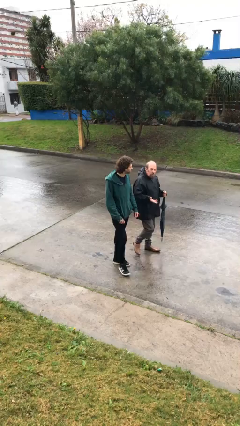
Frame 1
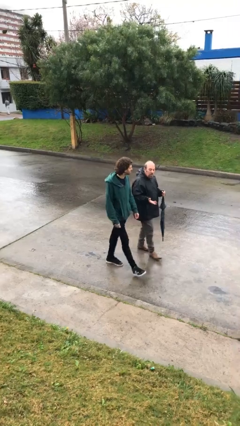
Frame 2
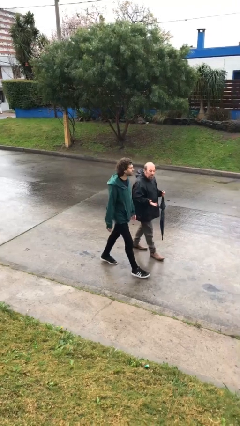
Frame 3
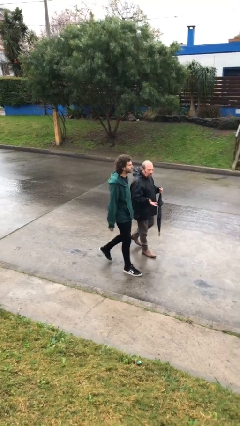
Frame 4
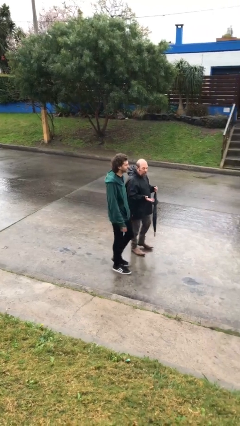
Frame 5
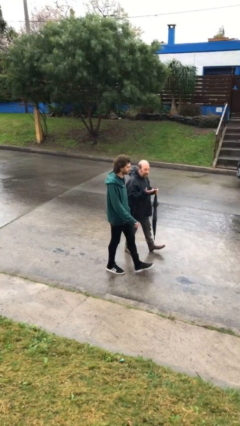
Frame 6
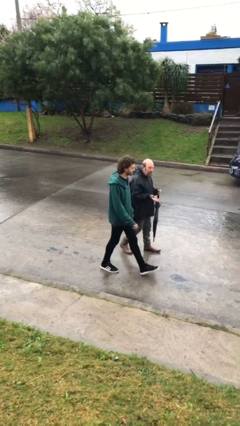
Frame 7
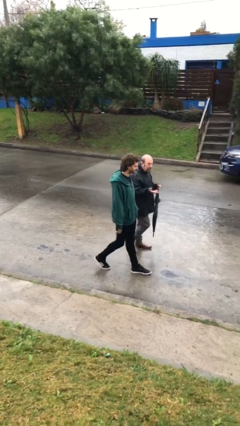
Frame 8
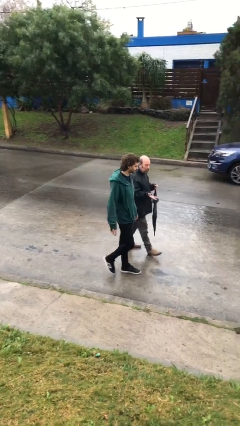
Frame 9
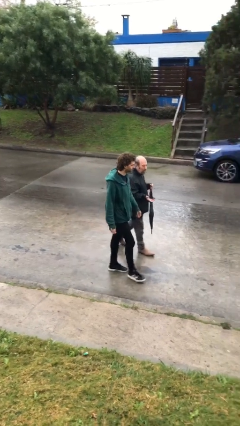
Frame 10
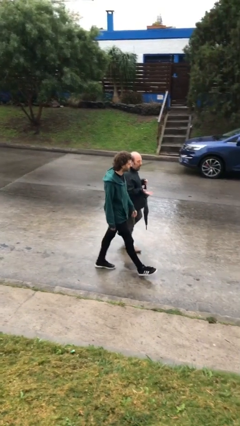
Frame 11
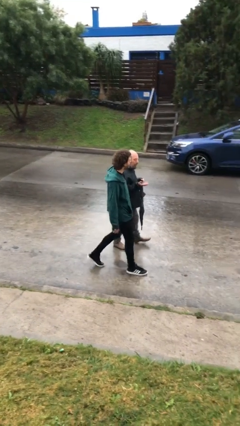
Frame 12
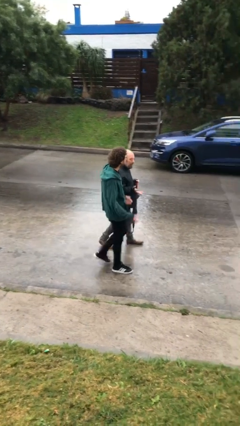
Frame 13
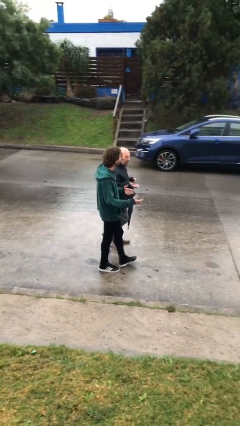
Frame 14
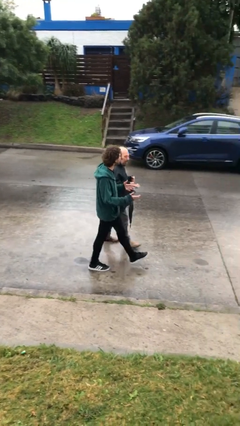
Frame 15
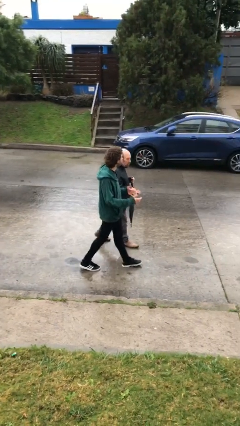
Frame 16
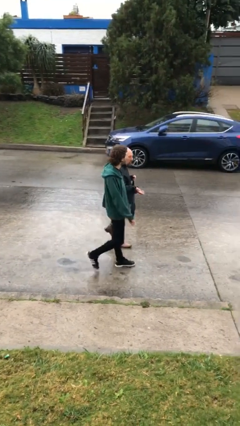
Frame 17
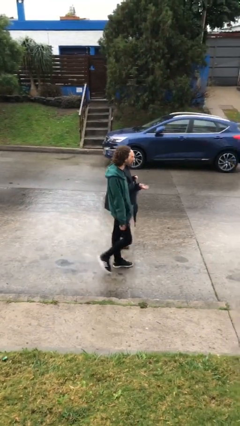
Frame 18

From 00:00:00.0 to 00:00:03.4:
person talks to person

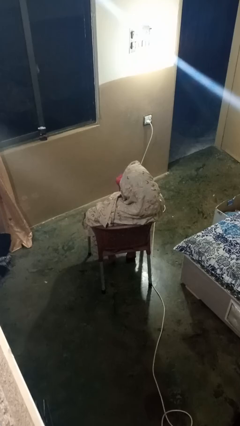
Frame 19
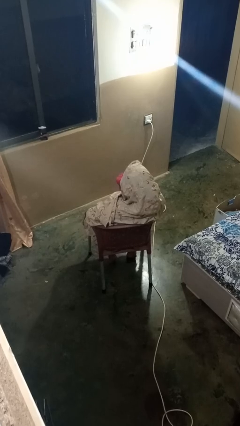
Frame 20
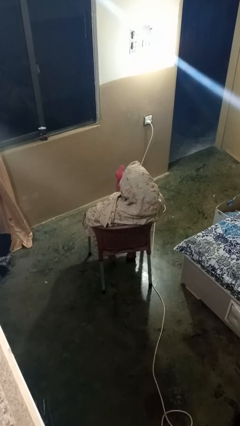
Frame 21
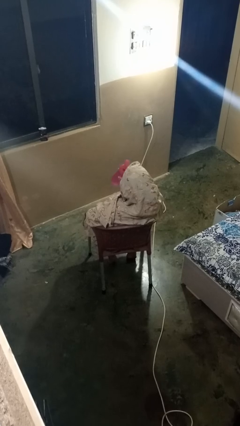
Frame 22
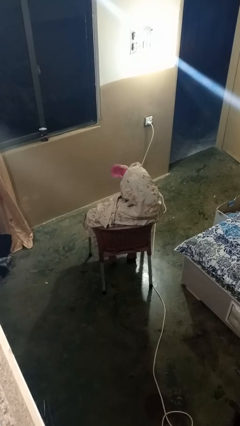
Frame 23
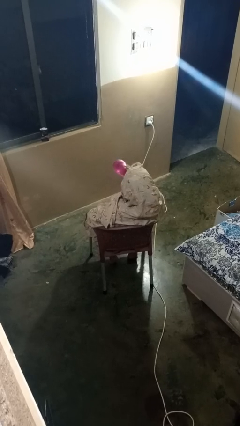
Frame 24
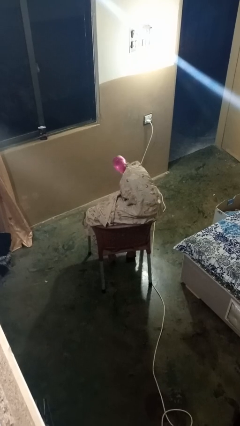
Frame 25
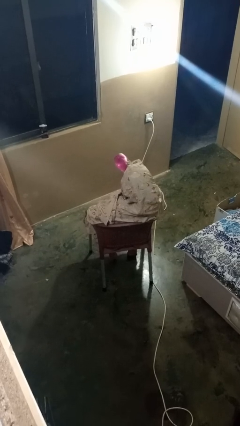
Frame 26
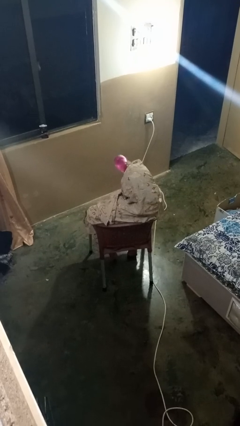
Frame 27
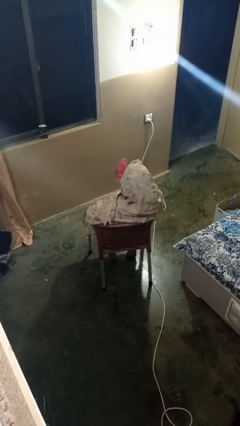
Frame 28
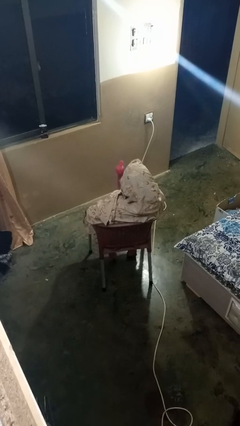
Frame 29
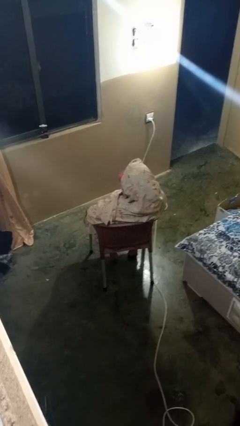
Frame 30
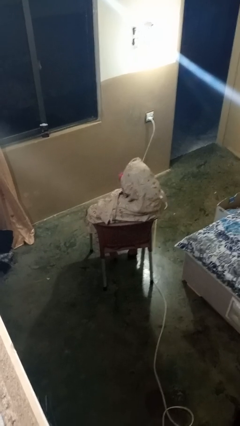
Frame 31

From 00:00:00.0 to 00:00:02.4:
person drinks from bottle

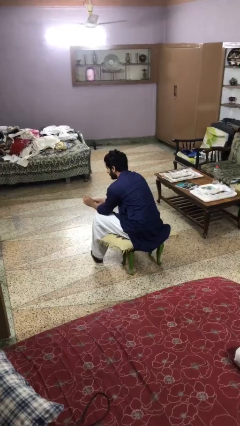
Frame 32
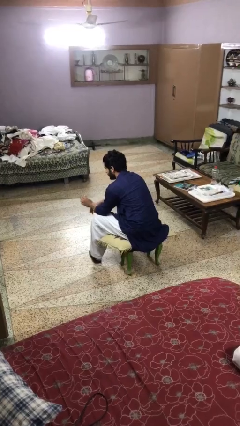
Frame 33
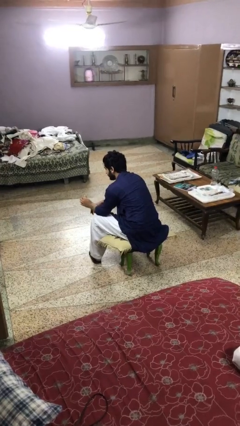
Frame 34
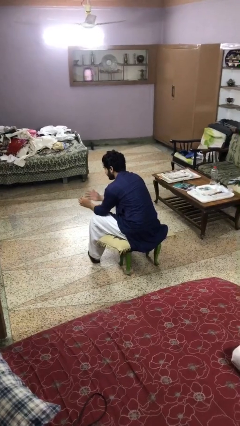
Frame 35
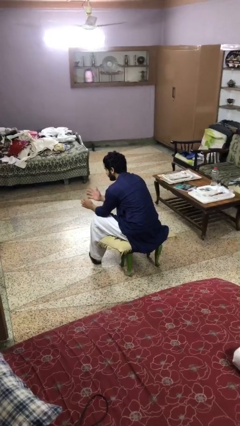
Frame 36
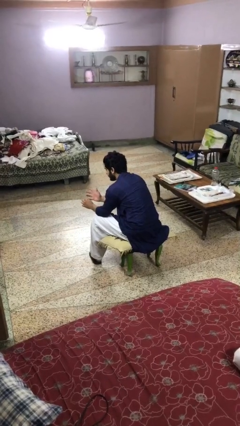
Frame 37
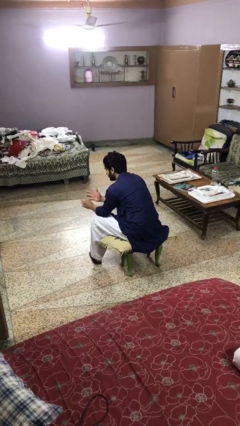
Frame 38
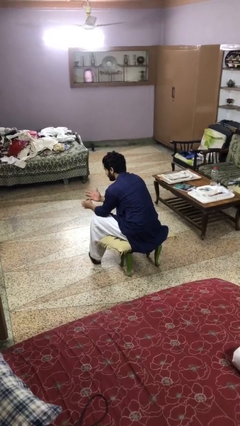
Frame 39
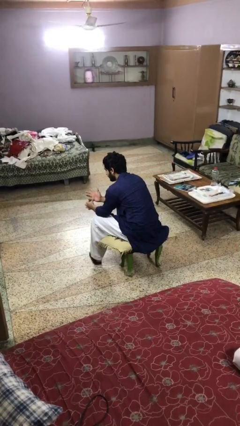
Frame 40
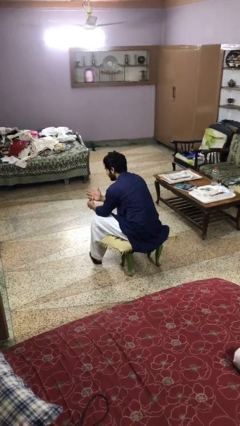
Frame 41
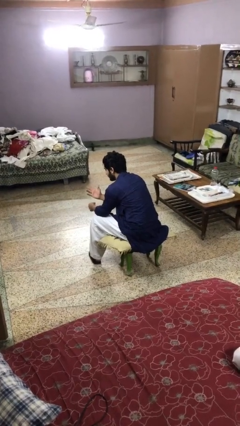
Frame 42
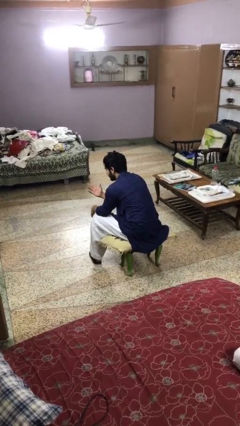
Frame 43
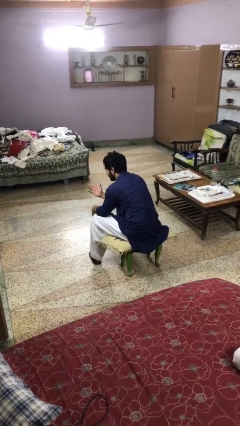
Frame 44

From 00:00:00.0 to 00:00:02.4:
person puts on ring

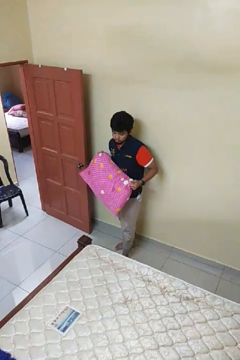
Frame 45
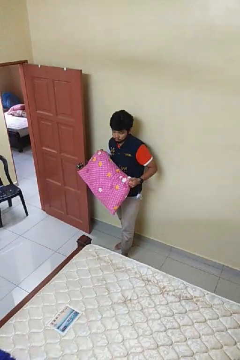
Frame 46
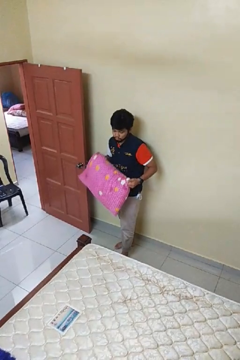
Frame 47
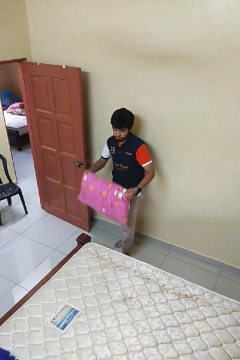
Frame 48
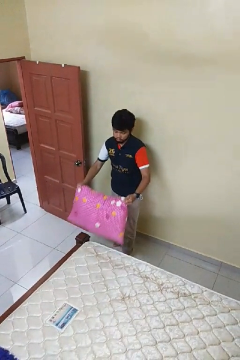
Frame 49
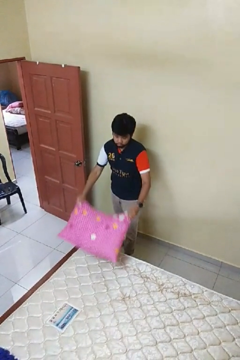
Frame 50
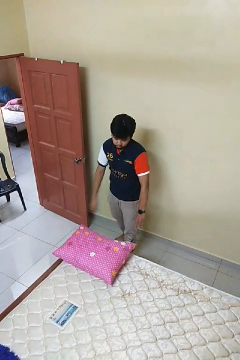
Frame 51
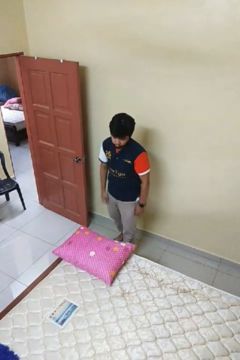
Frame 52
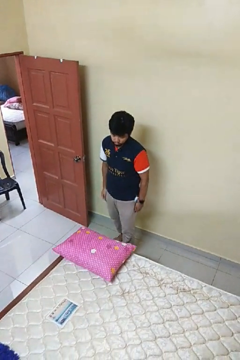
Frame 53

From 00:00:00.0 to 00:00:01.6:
person puts down object on bed

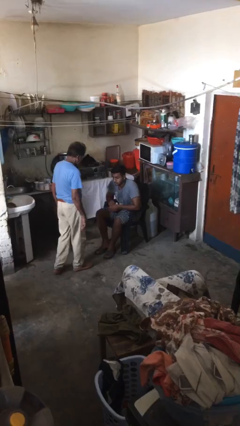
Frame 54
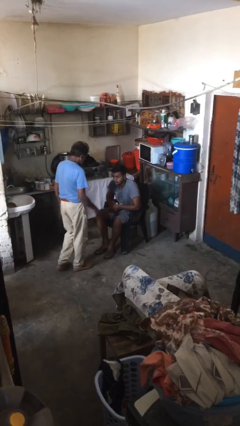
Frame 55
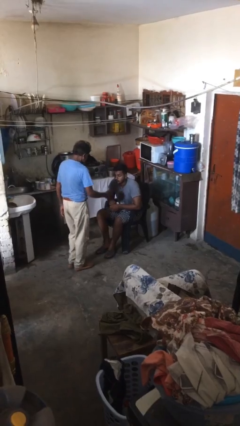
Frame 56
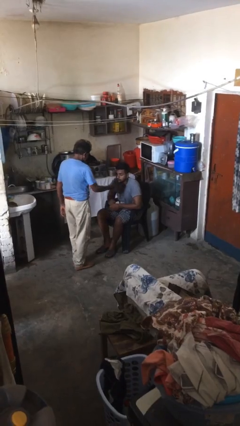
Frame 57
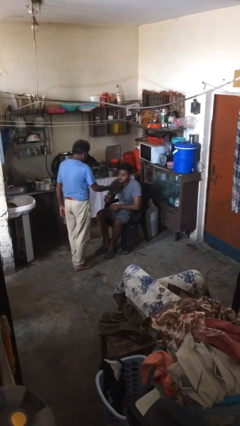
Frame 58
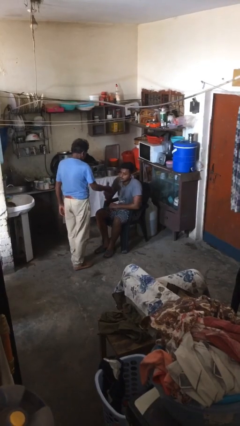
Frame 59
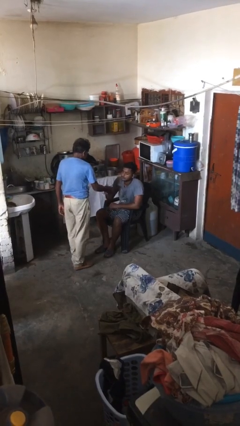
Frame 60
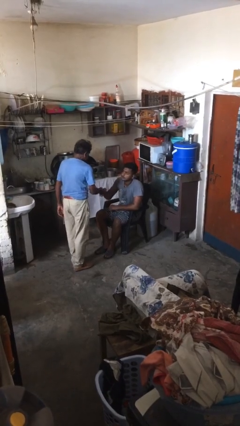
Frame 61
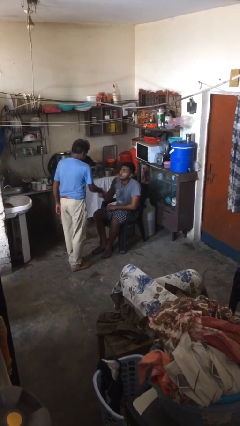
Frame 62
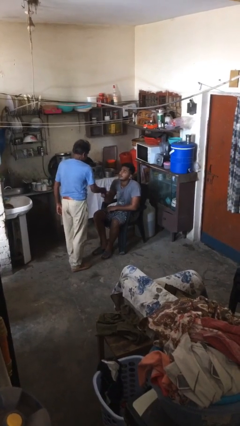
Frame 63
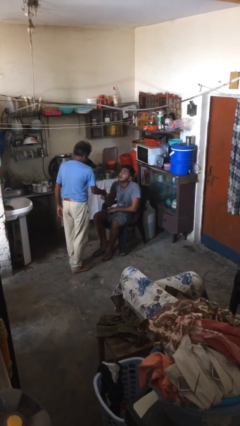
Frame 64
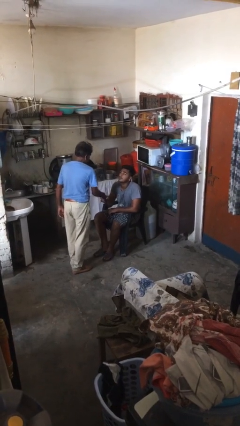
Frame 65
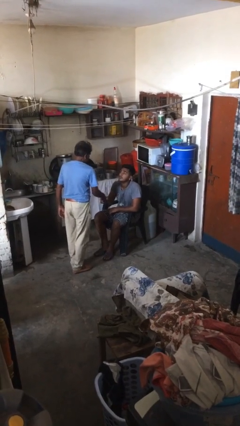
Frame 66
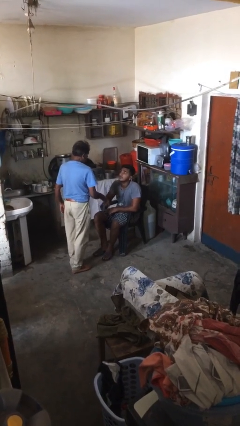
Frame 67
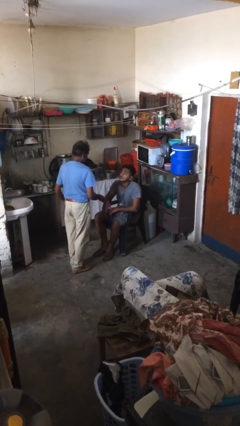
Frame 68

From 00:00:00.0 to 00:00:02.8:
person shakes hand

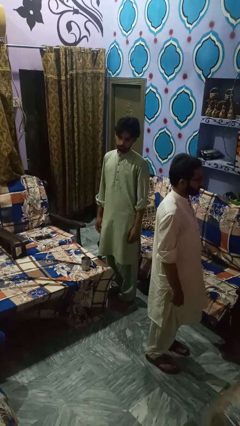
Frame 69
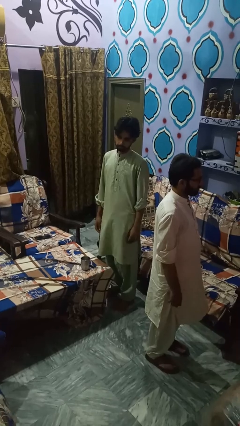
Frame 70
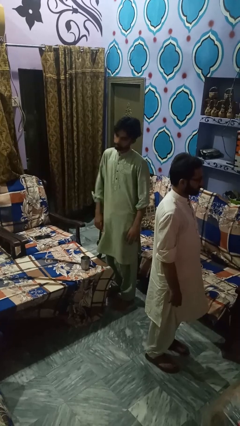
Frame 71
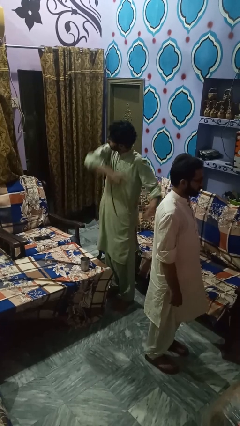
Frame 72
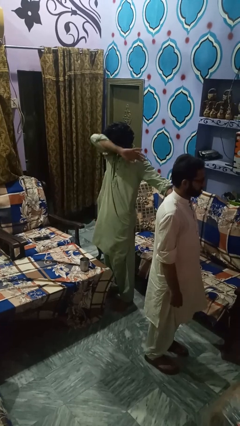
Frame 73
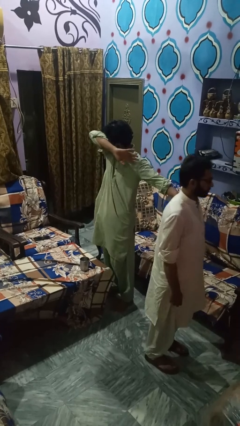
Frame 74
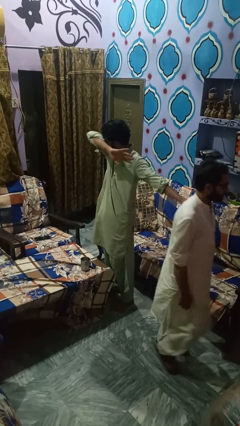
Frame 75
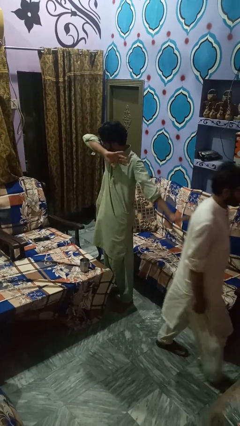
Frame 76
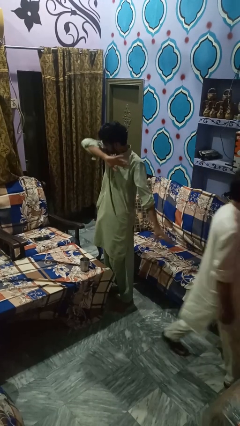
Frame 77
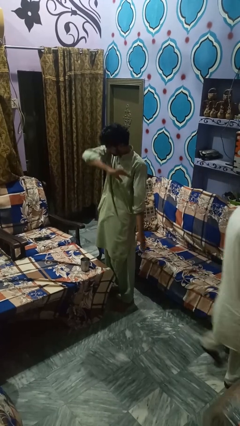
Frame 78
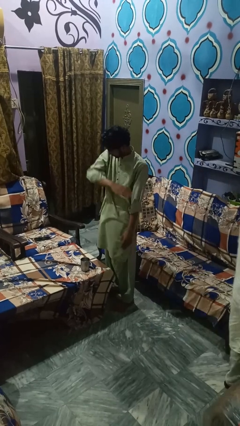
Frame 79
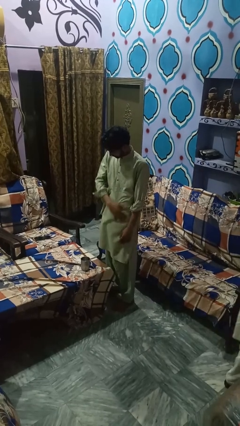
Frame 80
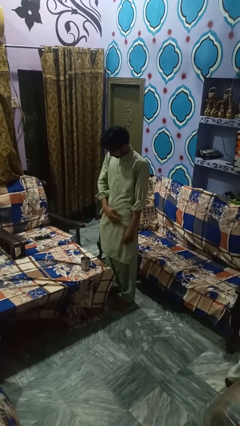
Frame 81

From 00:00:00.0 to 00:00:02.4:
person shoves person

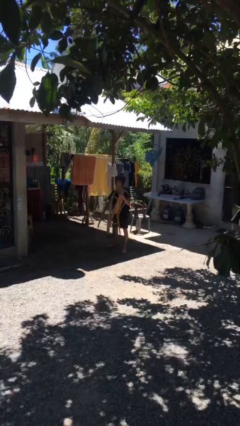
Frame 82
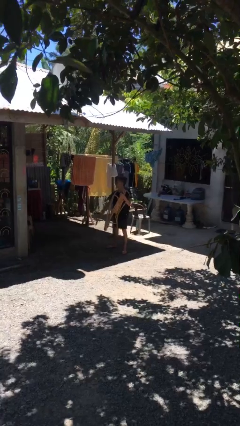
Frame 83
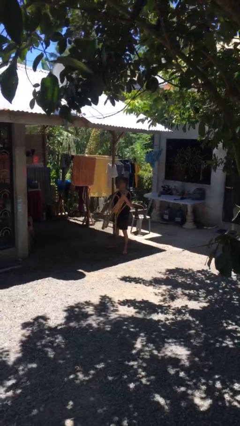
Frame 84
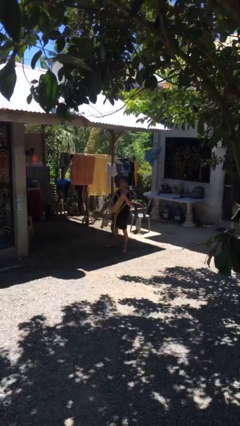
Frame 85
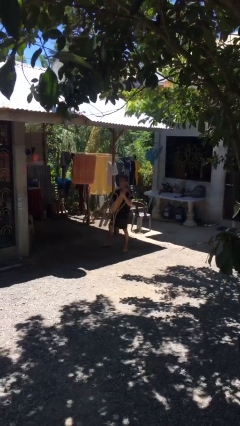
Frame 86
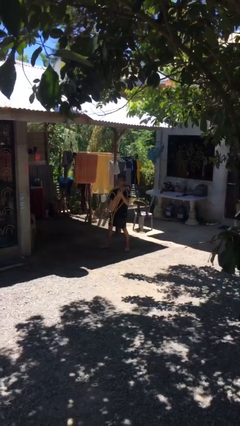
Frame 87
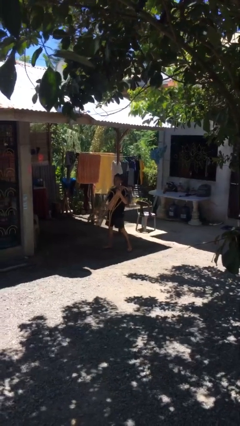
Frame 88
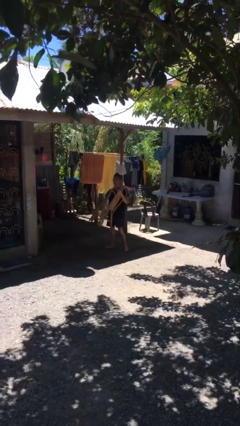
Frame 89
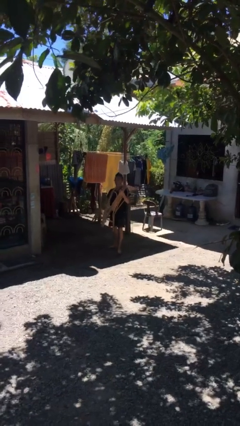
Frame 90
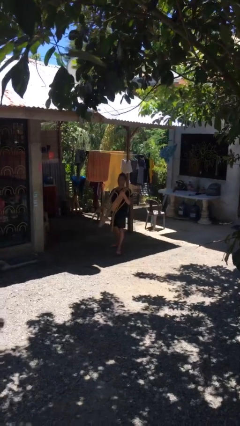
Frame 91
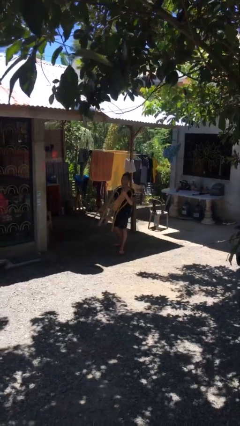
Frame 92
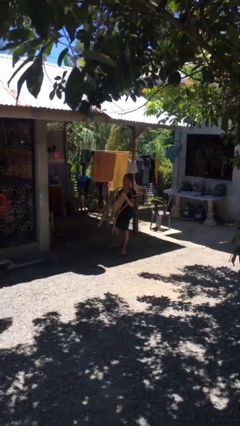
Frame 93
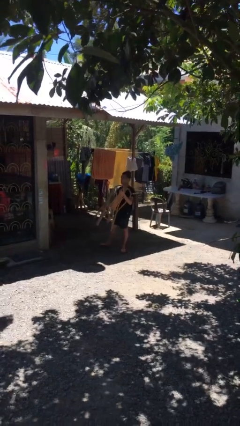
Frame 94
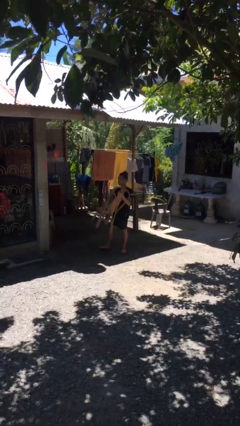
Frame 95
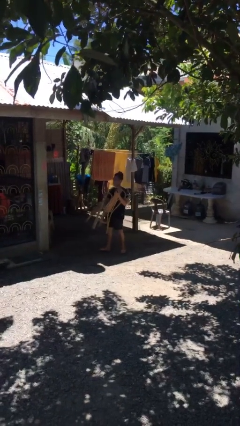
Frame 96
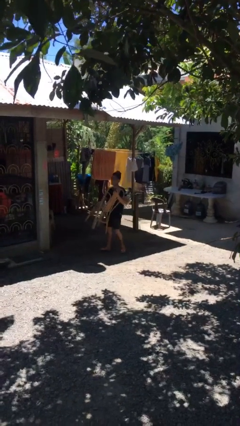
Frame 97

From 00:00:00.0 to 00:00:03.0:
person carries heavy object
